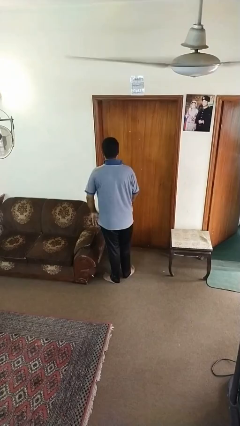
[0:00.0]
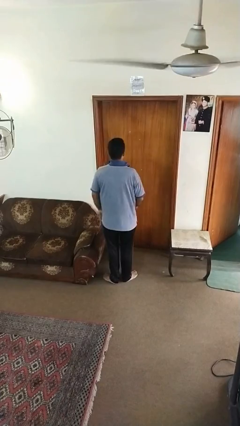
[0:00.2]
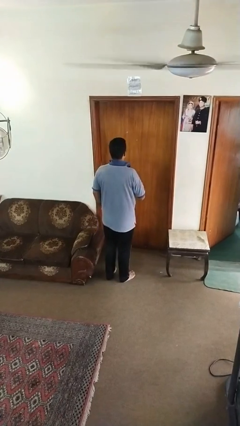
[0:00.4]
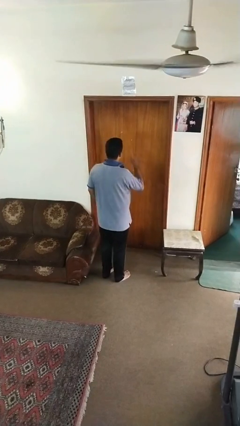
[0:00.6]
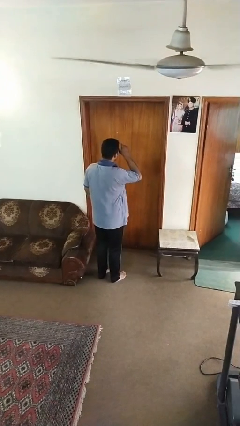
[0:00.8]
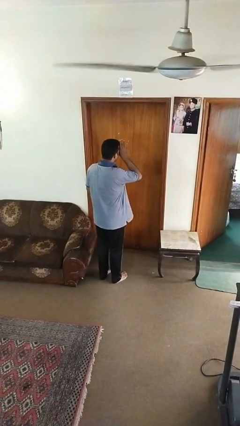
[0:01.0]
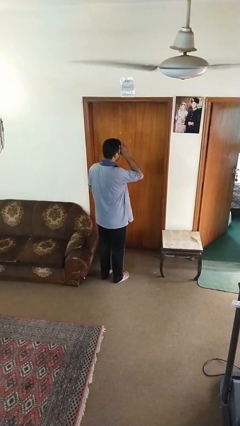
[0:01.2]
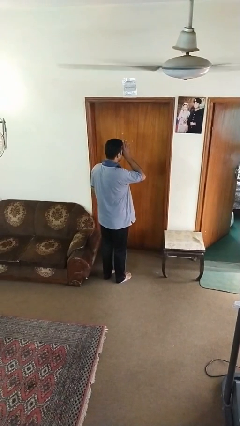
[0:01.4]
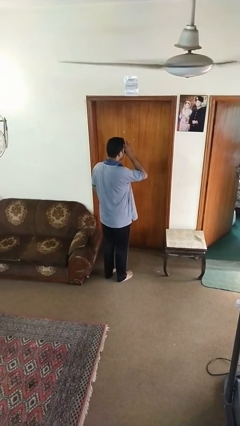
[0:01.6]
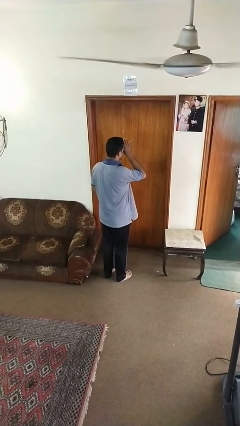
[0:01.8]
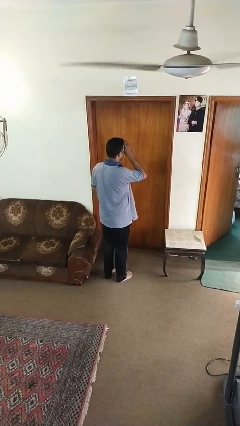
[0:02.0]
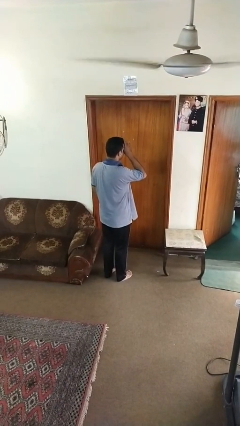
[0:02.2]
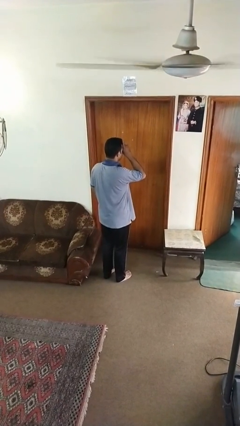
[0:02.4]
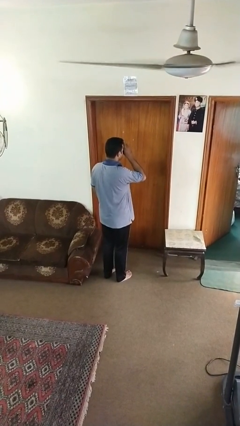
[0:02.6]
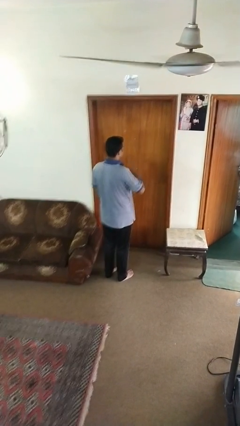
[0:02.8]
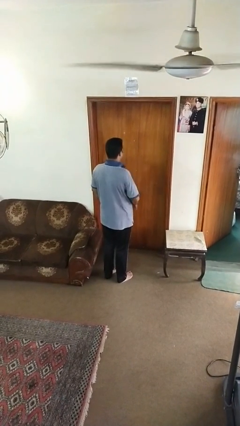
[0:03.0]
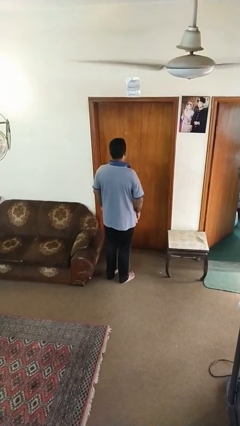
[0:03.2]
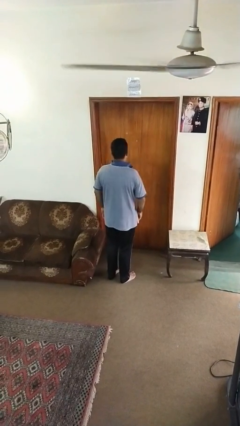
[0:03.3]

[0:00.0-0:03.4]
person rubs eyes

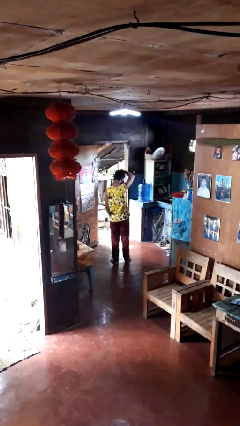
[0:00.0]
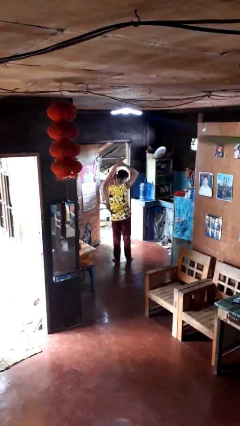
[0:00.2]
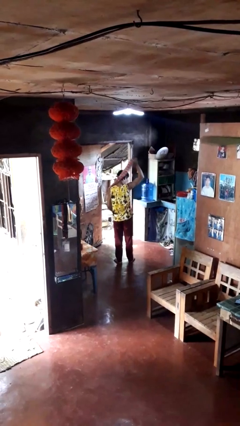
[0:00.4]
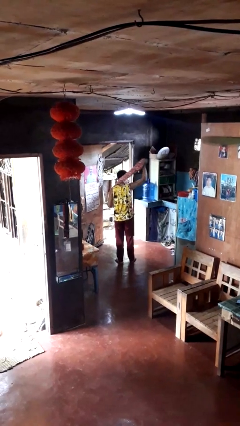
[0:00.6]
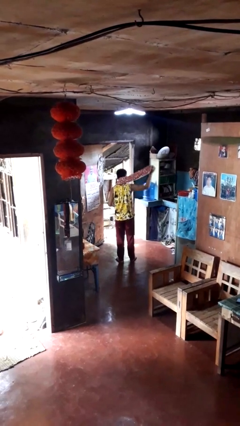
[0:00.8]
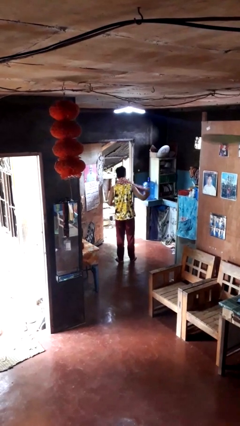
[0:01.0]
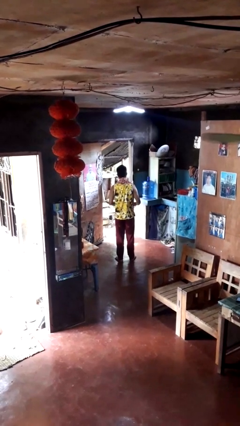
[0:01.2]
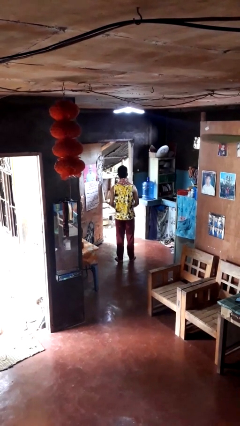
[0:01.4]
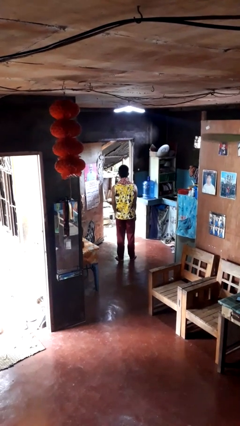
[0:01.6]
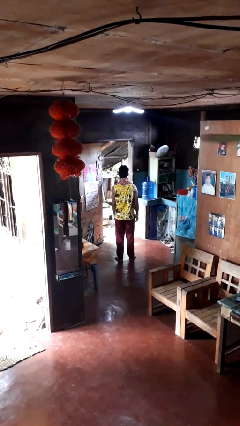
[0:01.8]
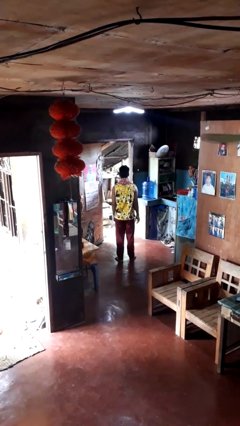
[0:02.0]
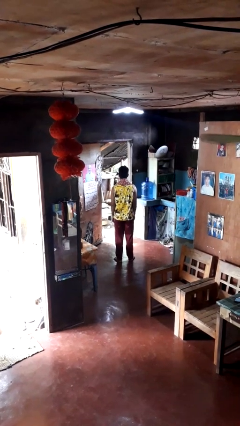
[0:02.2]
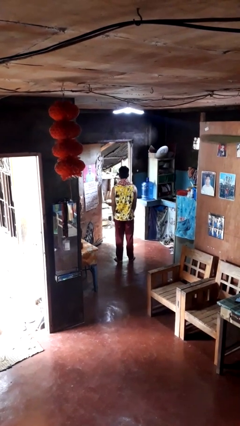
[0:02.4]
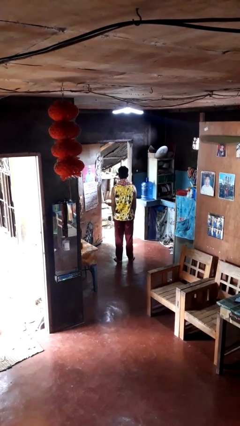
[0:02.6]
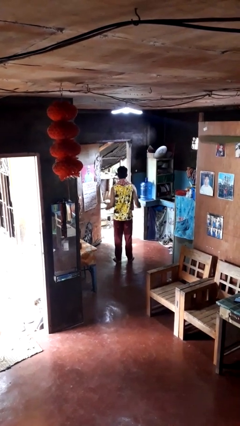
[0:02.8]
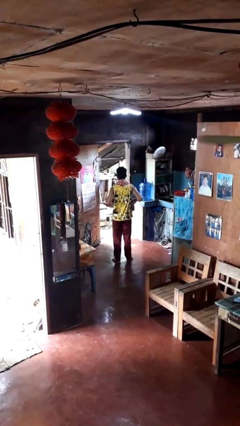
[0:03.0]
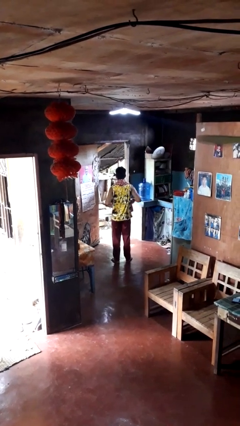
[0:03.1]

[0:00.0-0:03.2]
person puts on scarf

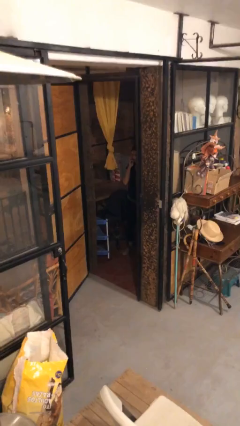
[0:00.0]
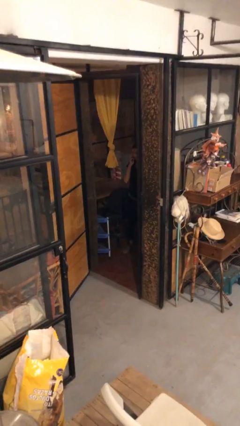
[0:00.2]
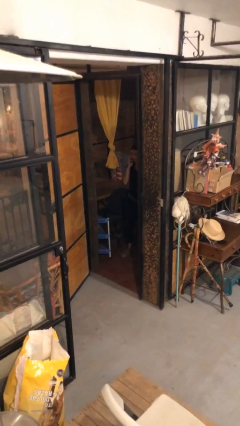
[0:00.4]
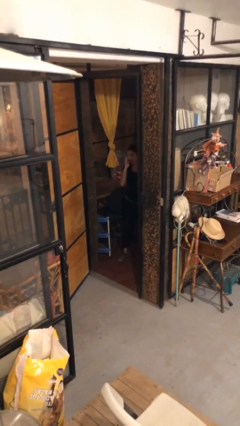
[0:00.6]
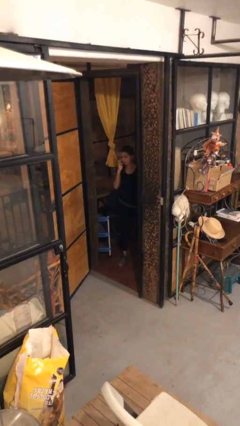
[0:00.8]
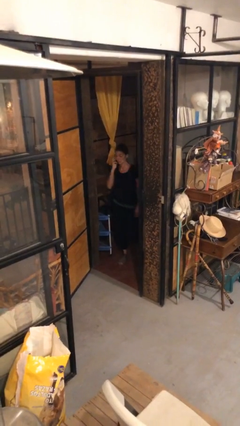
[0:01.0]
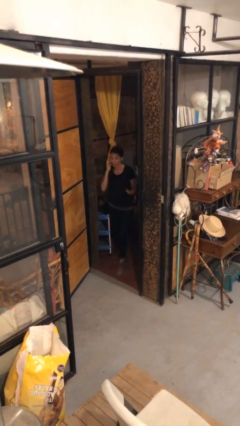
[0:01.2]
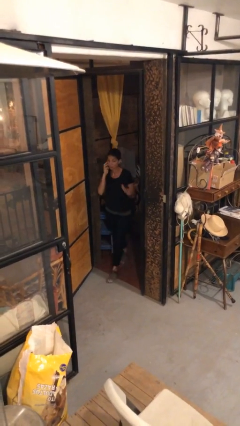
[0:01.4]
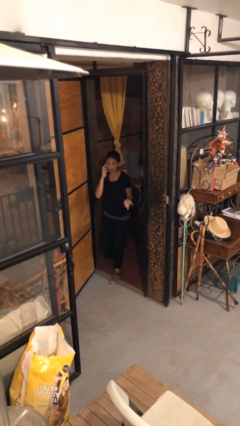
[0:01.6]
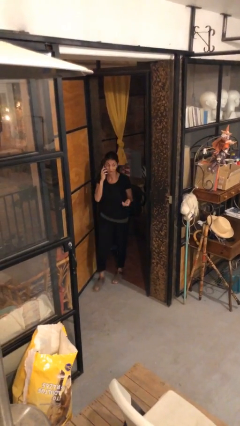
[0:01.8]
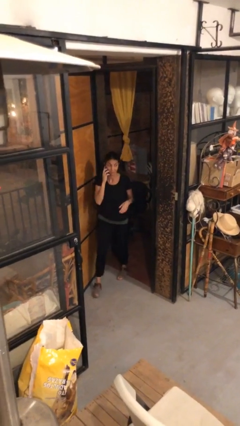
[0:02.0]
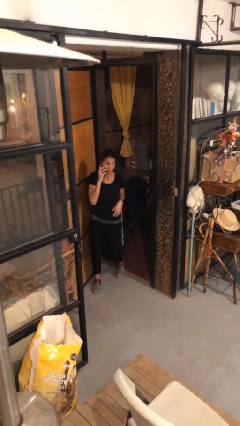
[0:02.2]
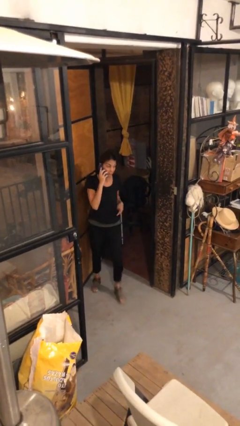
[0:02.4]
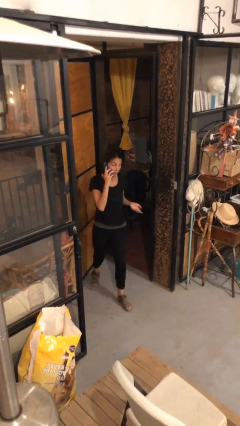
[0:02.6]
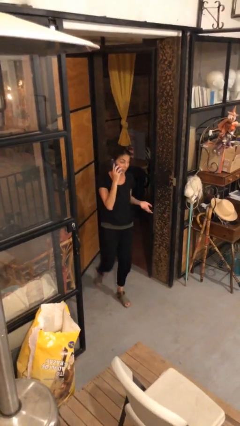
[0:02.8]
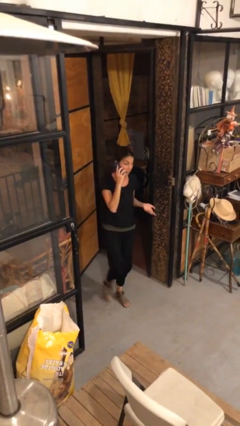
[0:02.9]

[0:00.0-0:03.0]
person enters scene through structure

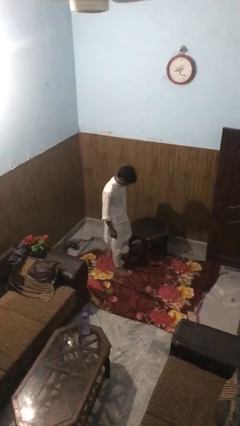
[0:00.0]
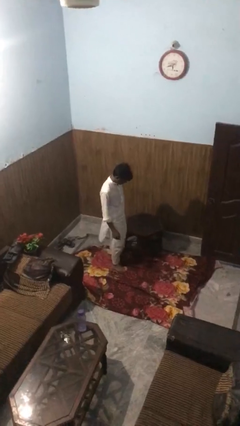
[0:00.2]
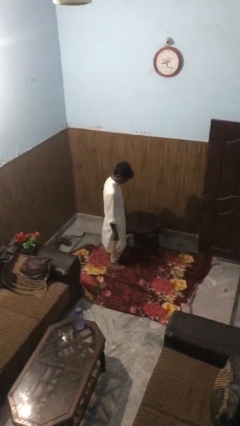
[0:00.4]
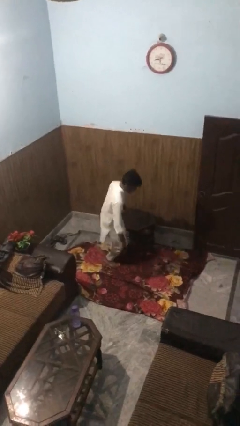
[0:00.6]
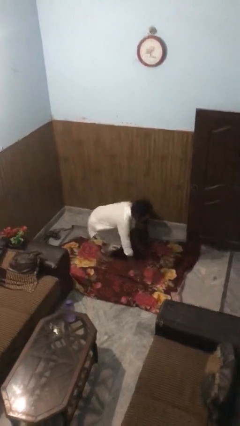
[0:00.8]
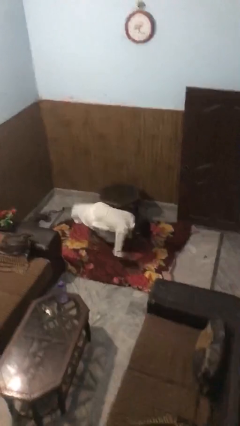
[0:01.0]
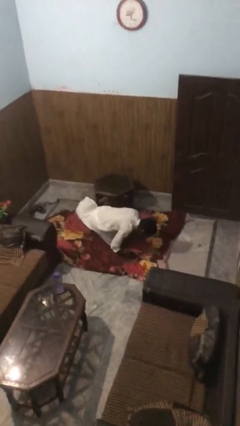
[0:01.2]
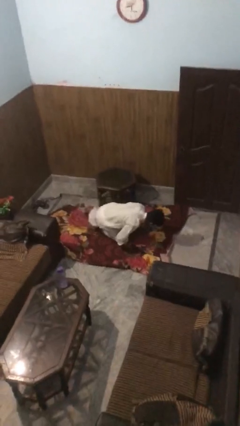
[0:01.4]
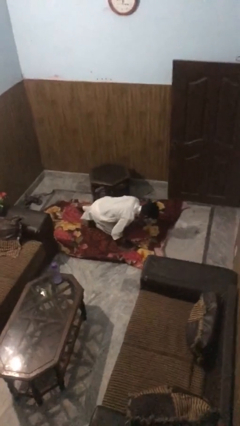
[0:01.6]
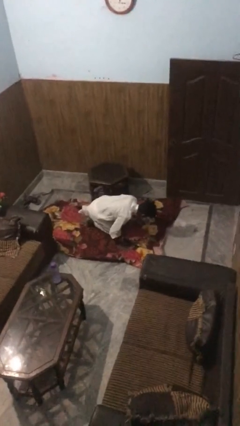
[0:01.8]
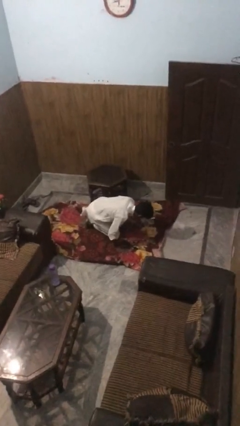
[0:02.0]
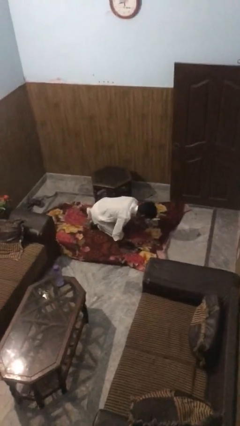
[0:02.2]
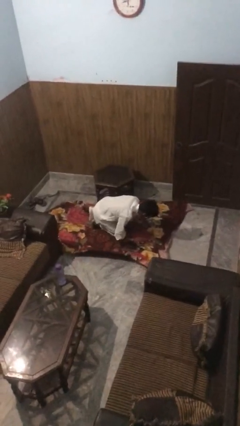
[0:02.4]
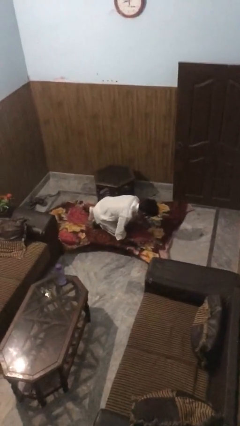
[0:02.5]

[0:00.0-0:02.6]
person bumps into table

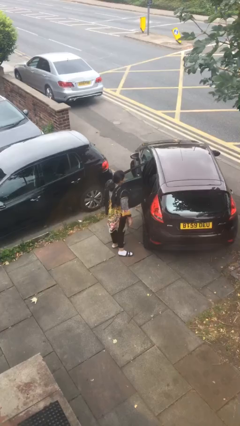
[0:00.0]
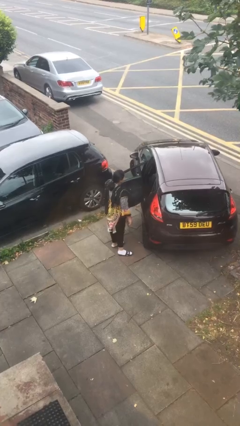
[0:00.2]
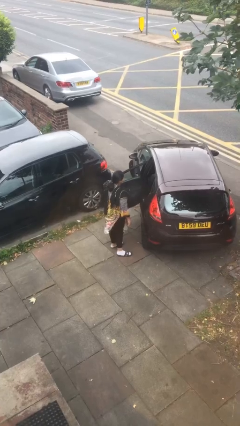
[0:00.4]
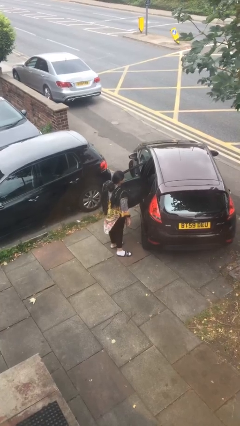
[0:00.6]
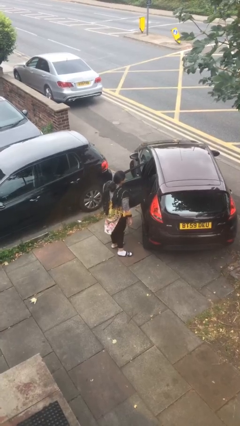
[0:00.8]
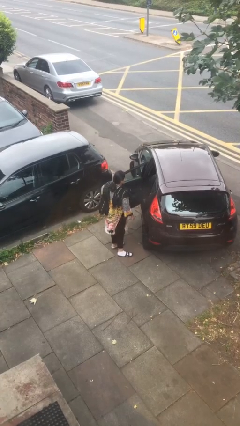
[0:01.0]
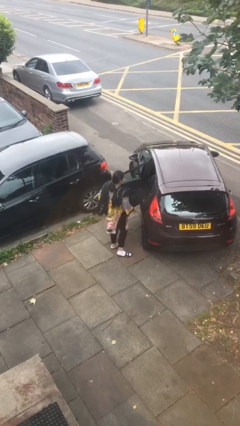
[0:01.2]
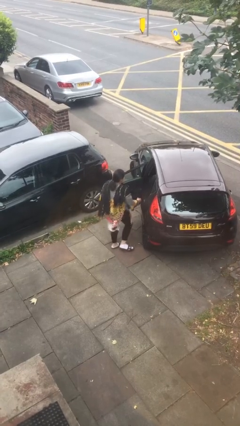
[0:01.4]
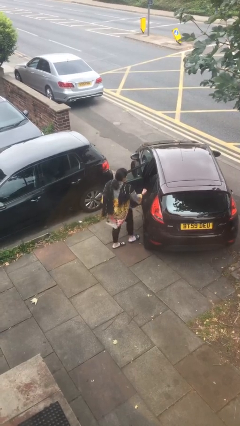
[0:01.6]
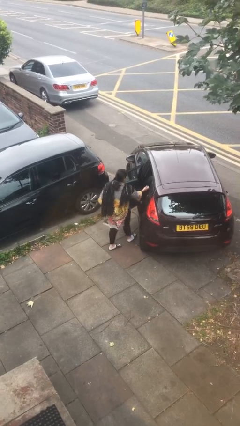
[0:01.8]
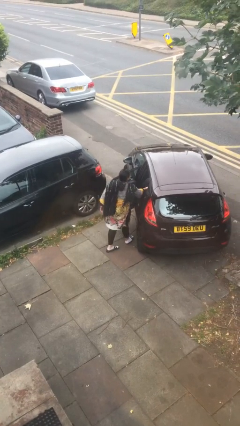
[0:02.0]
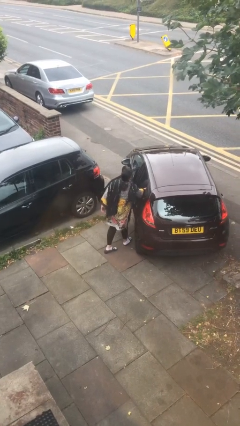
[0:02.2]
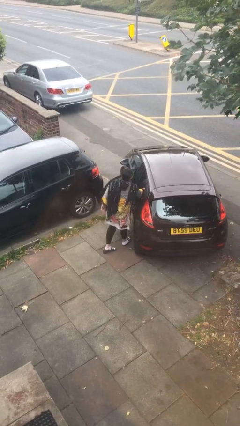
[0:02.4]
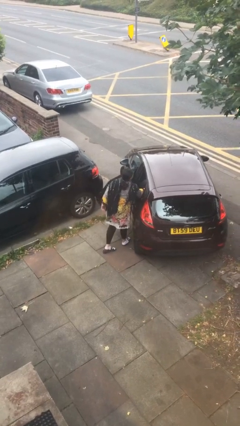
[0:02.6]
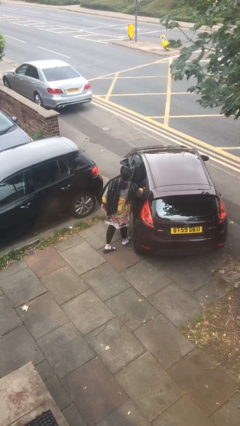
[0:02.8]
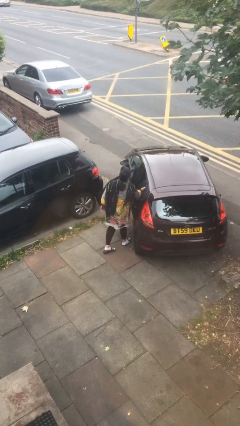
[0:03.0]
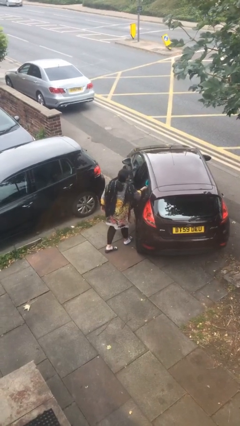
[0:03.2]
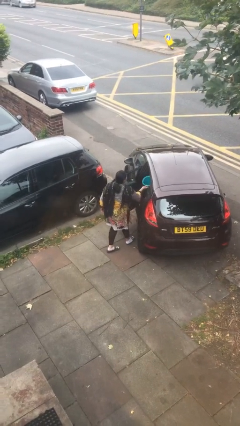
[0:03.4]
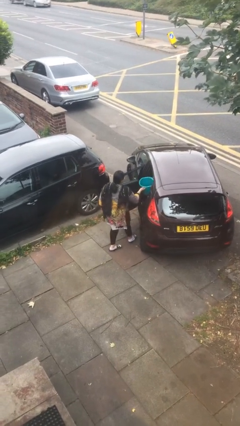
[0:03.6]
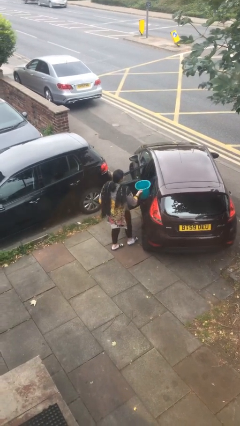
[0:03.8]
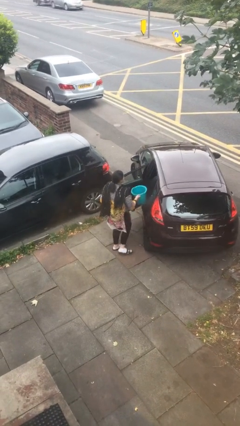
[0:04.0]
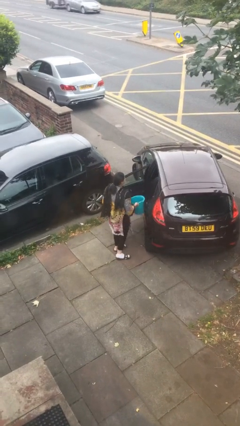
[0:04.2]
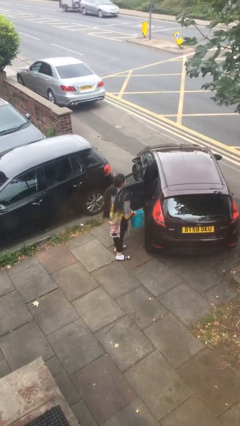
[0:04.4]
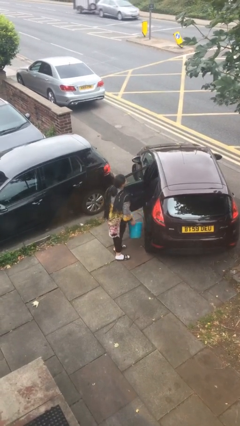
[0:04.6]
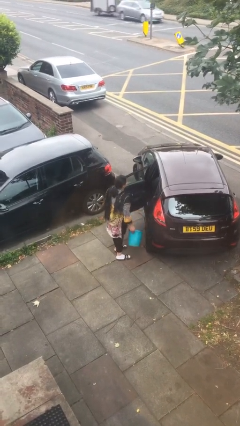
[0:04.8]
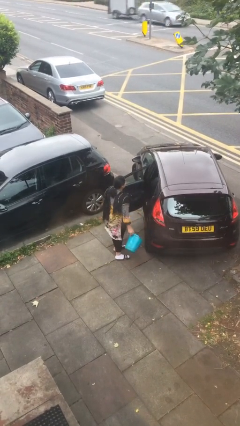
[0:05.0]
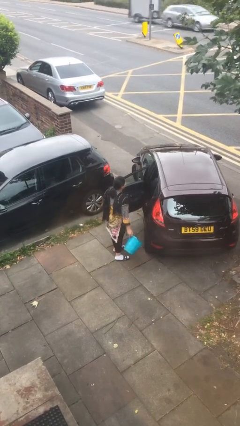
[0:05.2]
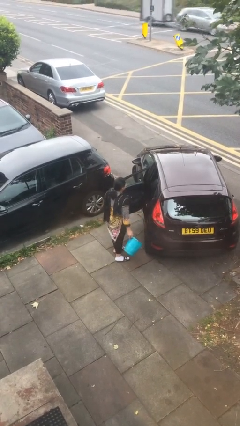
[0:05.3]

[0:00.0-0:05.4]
person unloads car
